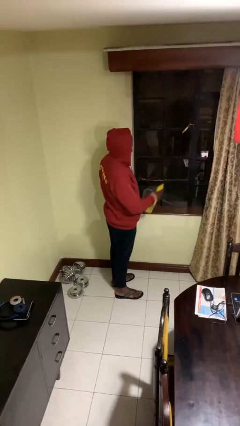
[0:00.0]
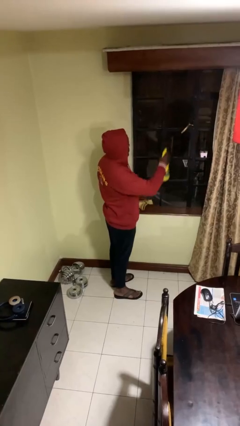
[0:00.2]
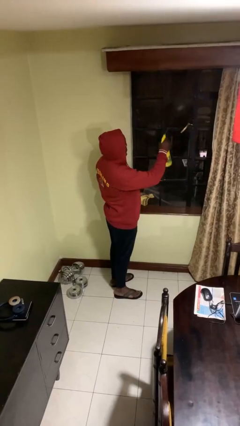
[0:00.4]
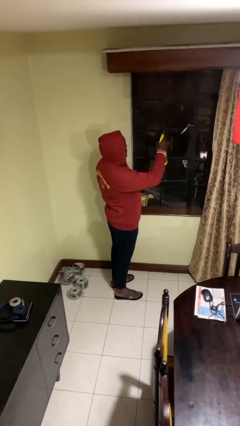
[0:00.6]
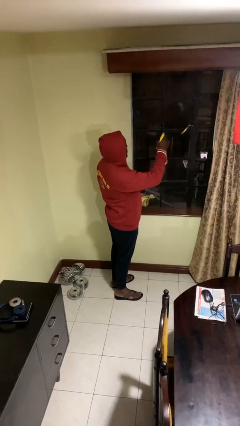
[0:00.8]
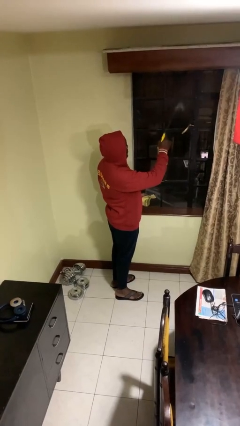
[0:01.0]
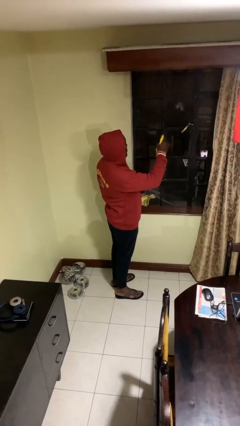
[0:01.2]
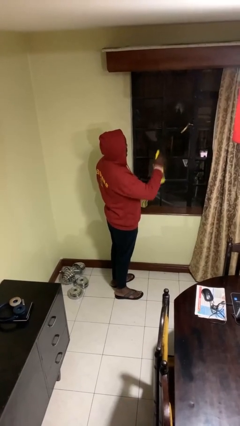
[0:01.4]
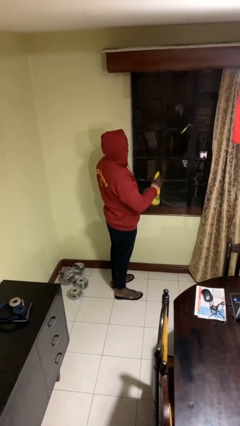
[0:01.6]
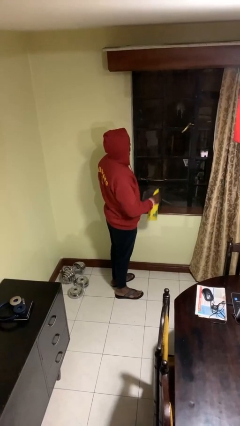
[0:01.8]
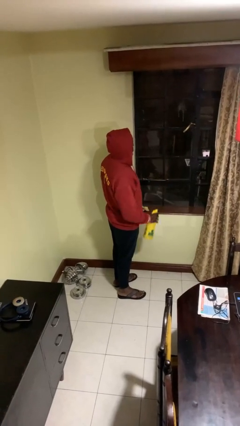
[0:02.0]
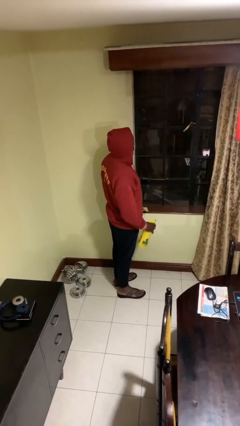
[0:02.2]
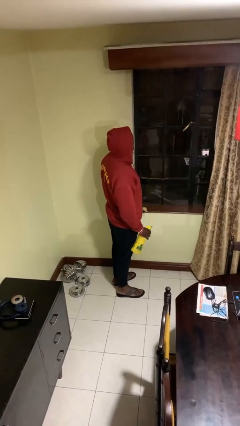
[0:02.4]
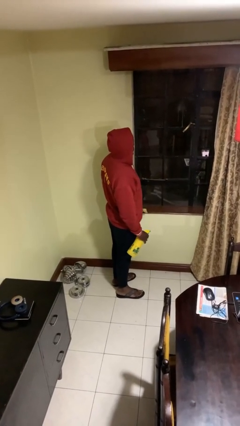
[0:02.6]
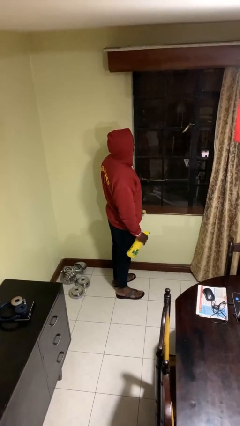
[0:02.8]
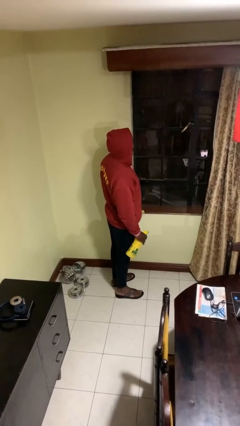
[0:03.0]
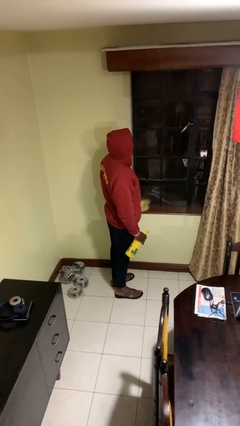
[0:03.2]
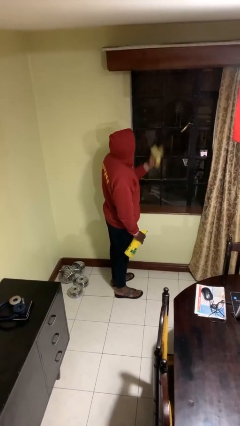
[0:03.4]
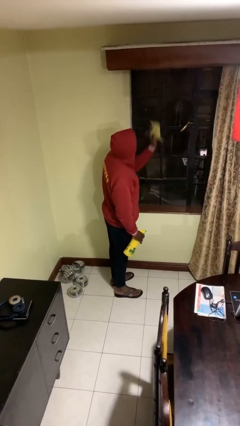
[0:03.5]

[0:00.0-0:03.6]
person sprays from bottle

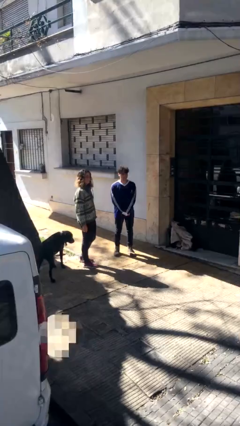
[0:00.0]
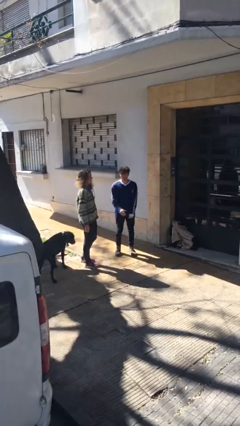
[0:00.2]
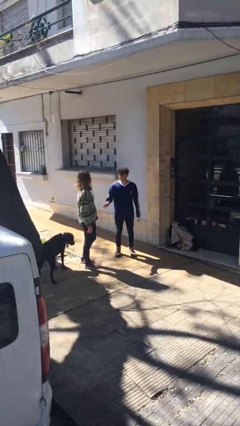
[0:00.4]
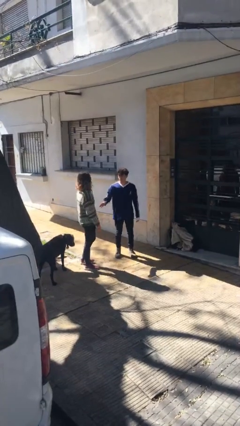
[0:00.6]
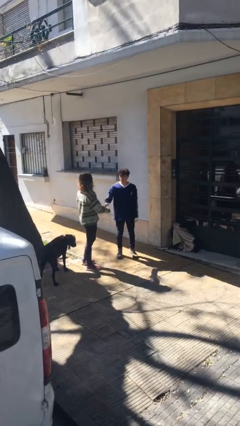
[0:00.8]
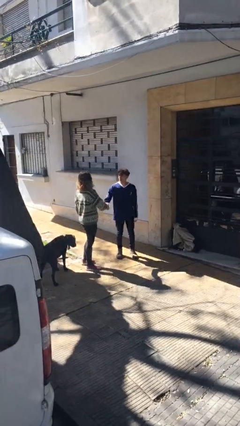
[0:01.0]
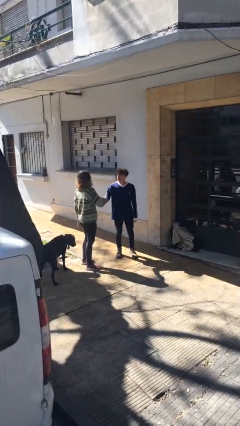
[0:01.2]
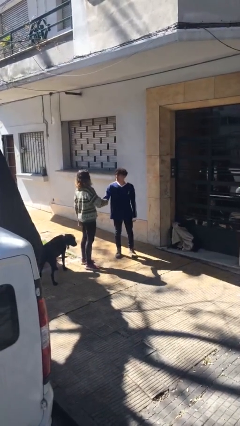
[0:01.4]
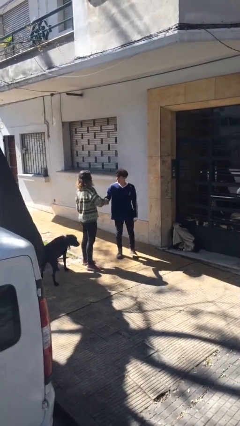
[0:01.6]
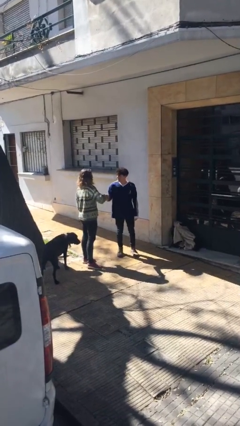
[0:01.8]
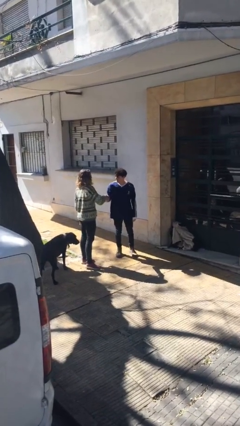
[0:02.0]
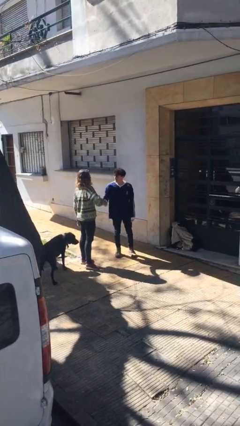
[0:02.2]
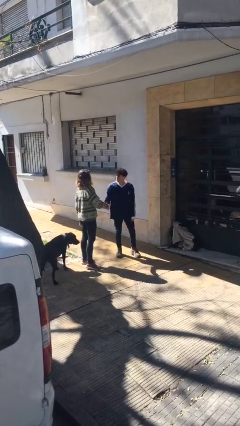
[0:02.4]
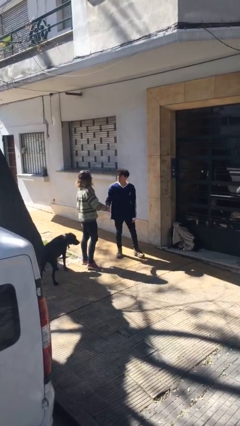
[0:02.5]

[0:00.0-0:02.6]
person shakes hand

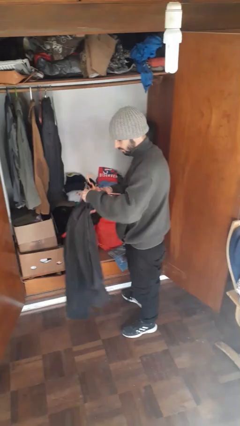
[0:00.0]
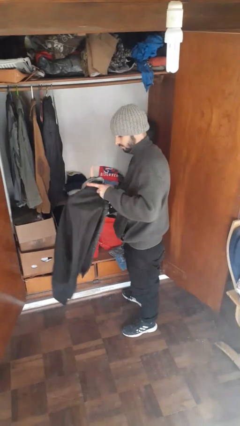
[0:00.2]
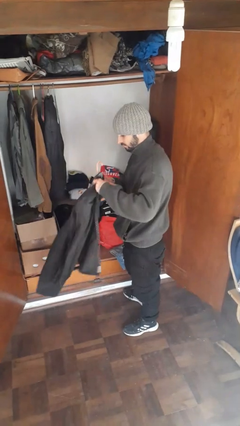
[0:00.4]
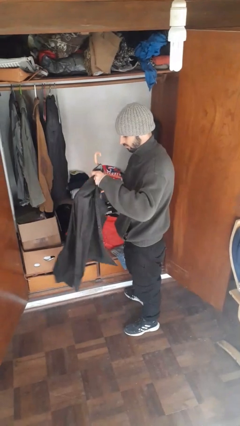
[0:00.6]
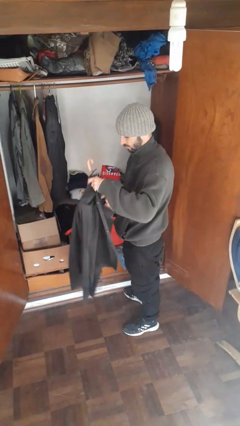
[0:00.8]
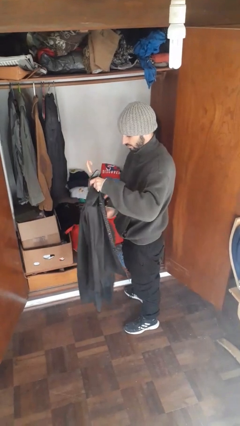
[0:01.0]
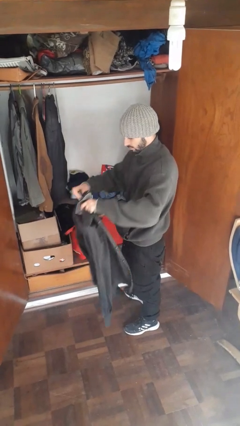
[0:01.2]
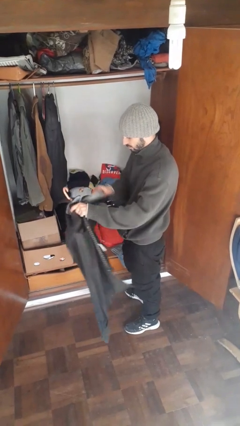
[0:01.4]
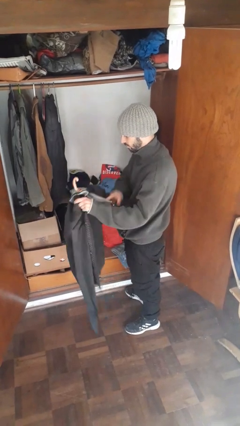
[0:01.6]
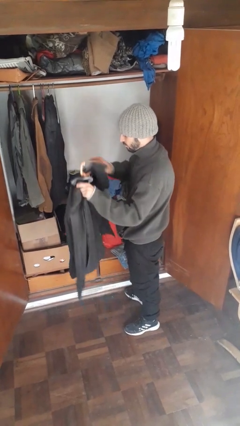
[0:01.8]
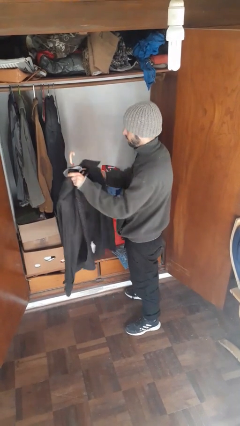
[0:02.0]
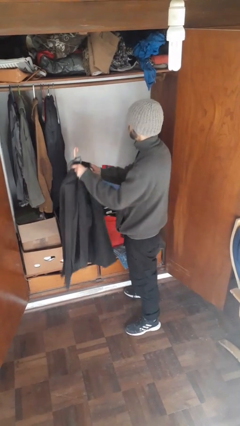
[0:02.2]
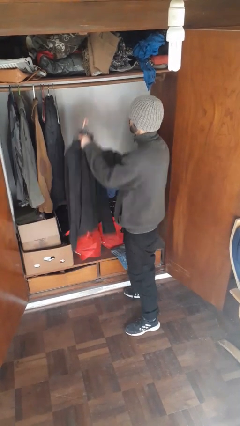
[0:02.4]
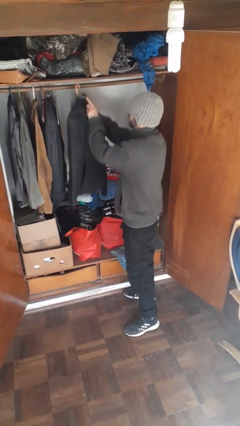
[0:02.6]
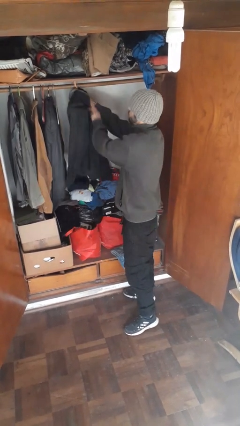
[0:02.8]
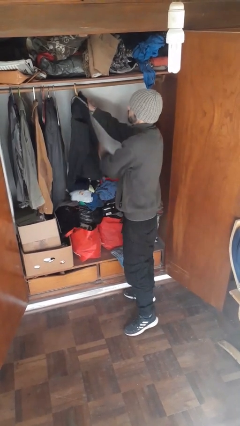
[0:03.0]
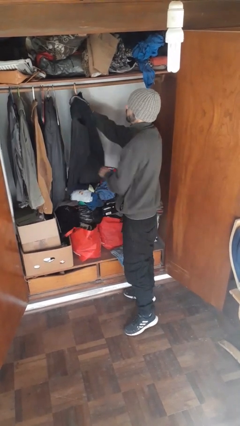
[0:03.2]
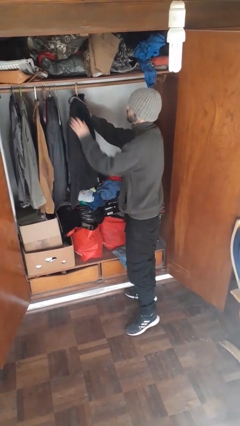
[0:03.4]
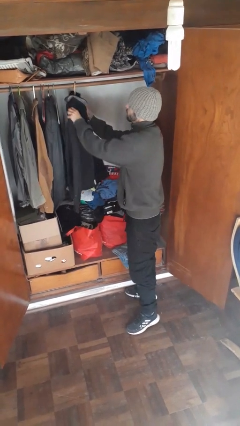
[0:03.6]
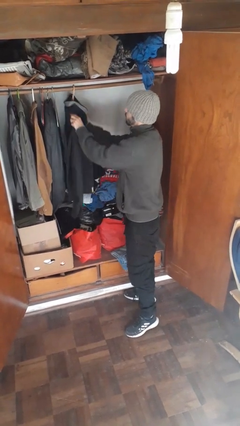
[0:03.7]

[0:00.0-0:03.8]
person puts clothes into closet

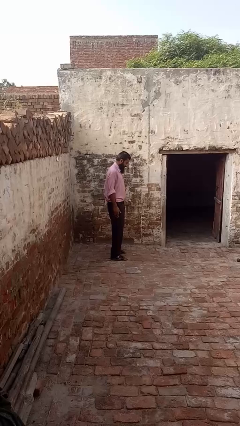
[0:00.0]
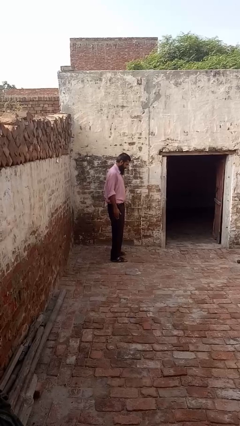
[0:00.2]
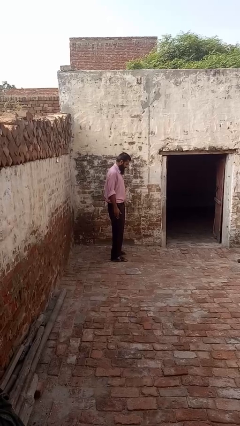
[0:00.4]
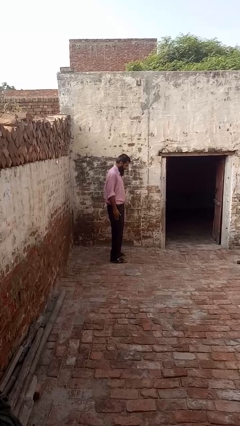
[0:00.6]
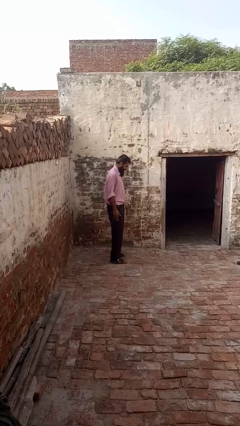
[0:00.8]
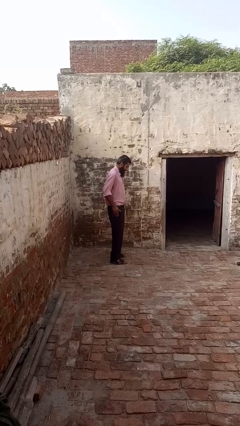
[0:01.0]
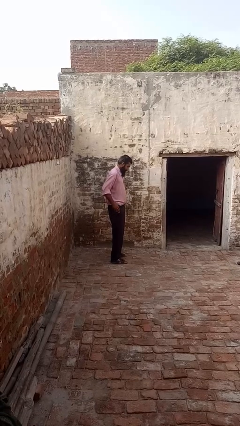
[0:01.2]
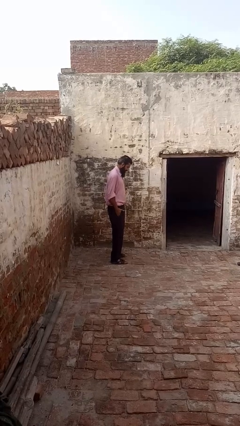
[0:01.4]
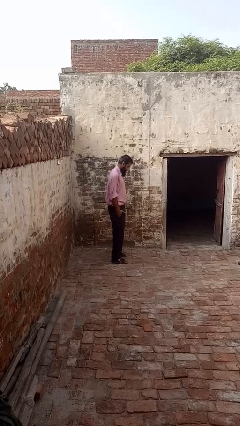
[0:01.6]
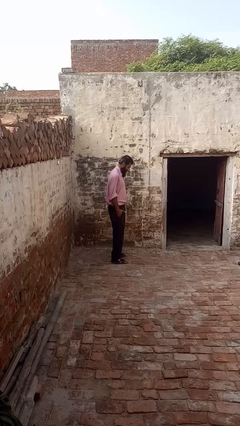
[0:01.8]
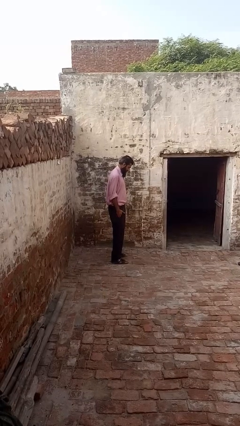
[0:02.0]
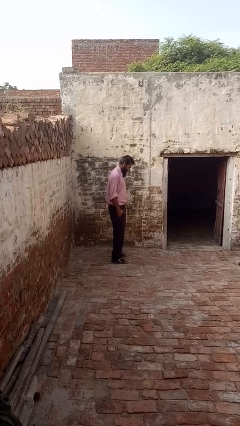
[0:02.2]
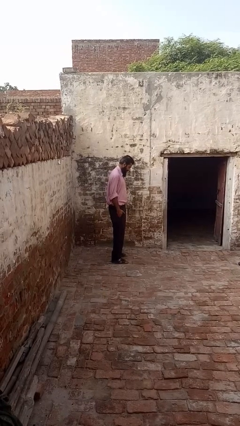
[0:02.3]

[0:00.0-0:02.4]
person puts hands in back pockets

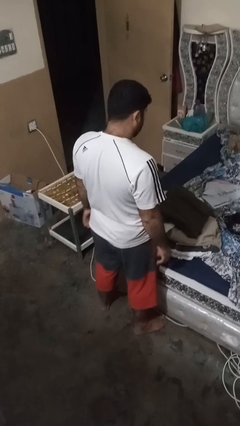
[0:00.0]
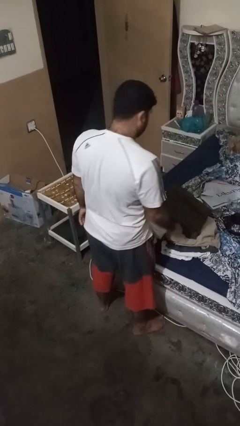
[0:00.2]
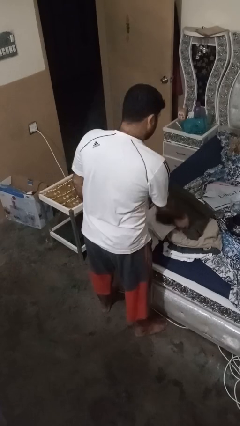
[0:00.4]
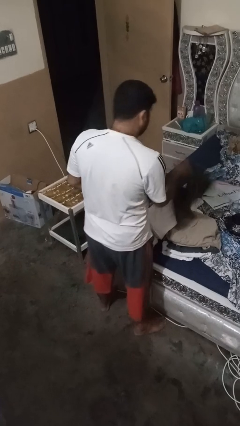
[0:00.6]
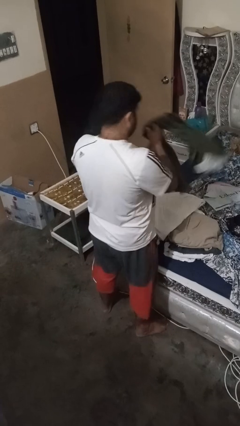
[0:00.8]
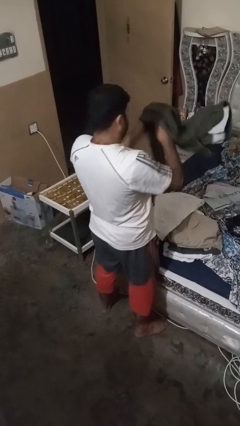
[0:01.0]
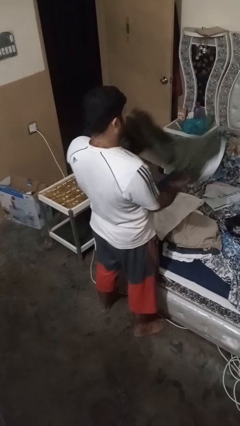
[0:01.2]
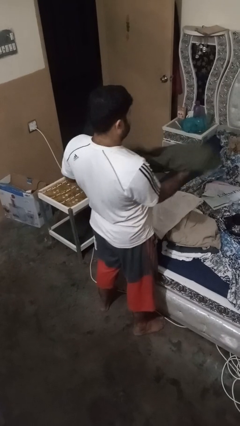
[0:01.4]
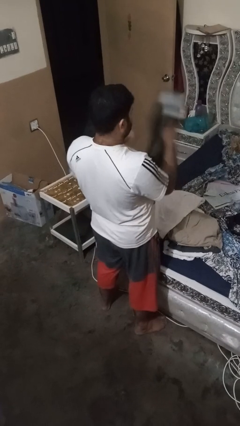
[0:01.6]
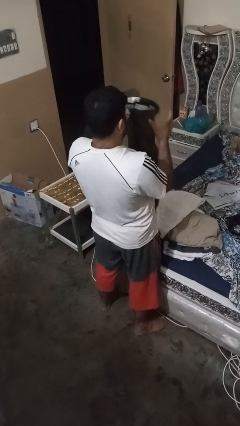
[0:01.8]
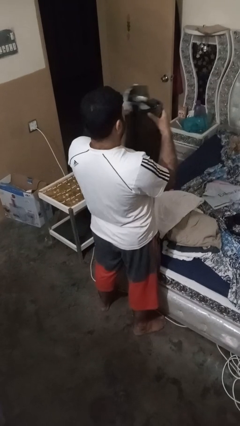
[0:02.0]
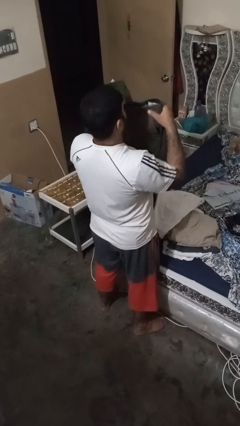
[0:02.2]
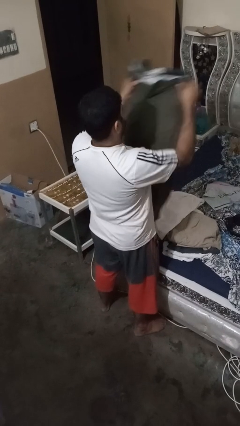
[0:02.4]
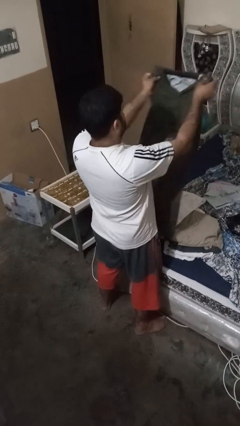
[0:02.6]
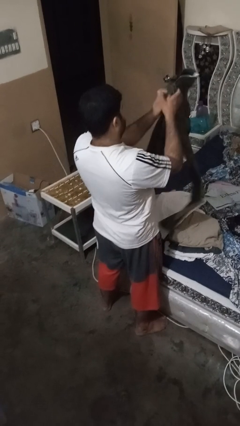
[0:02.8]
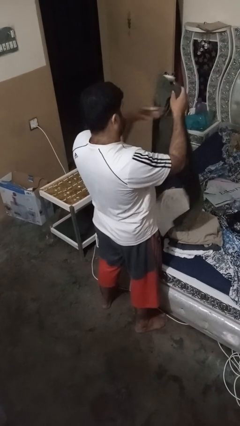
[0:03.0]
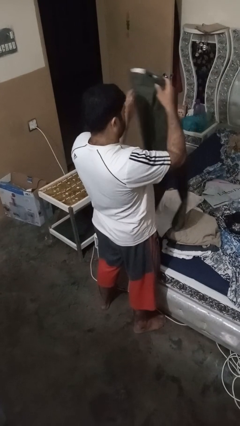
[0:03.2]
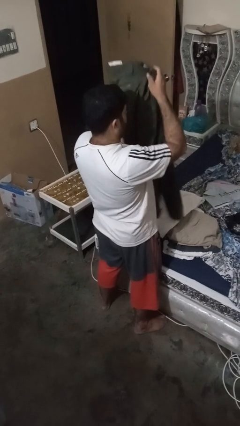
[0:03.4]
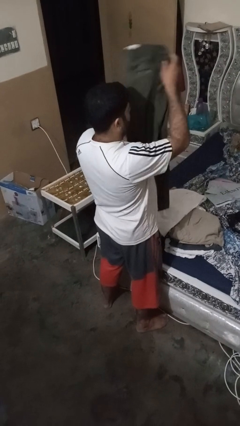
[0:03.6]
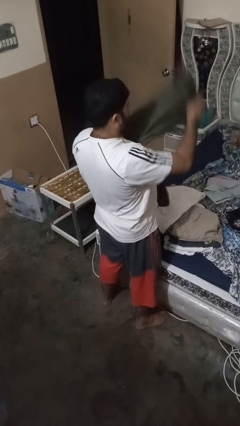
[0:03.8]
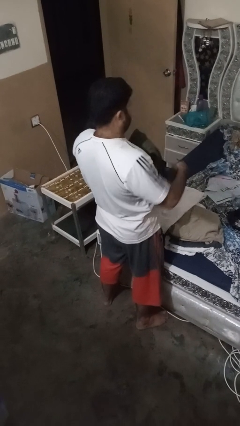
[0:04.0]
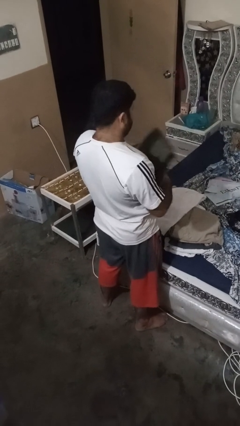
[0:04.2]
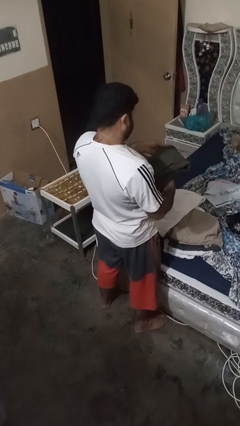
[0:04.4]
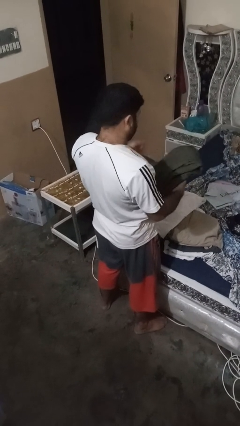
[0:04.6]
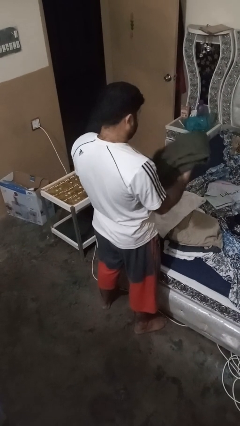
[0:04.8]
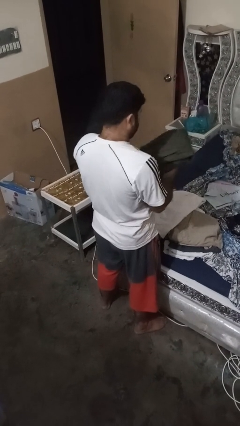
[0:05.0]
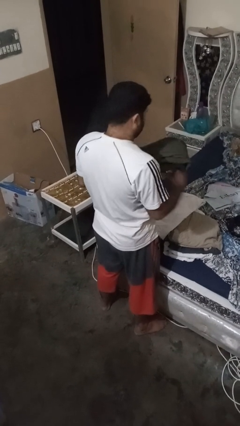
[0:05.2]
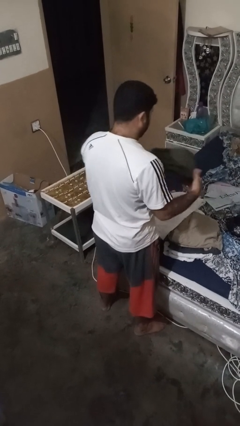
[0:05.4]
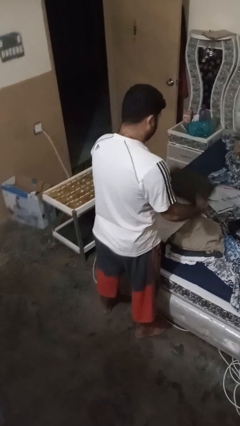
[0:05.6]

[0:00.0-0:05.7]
person folds pants
